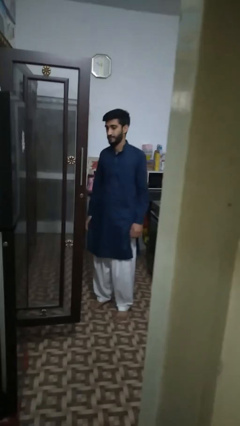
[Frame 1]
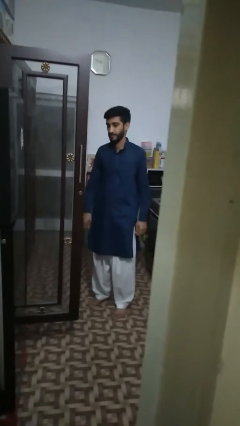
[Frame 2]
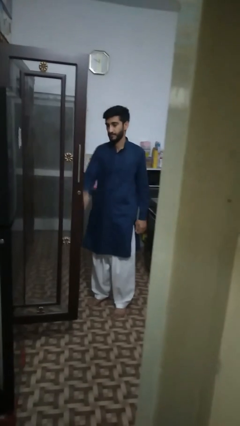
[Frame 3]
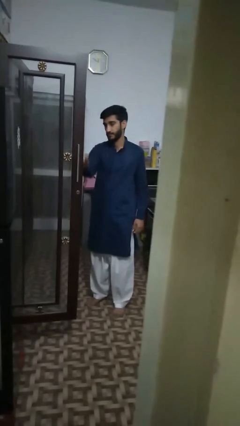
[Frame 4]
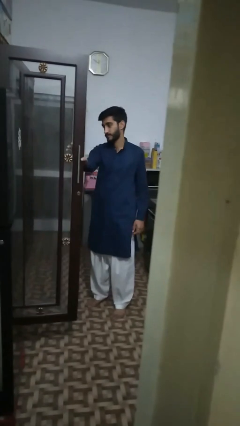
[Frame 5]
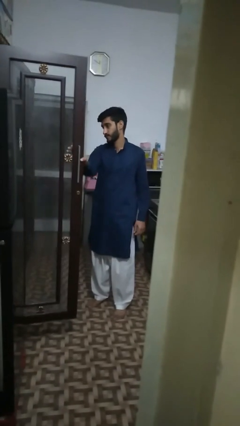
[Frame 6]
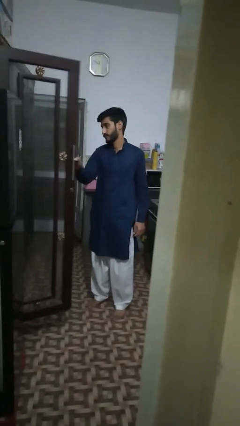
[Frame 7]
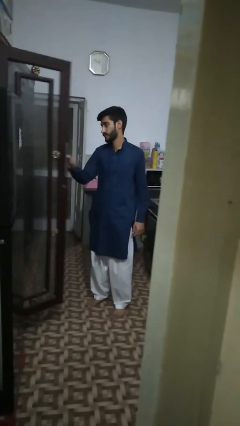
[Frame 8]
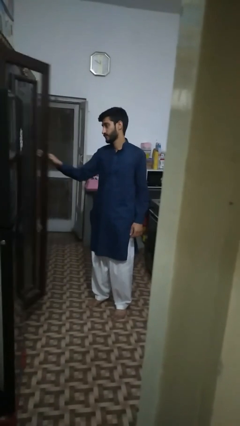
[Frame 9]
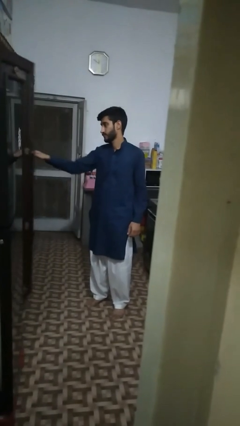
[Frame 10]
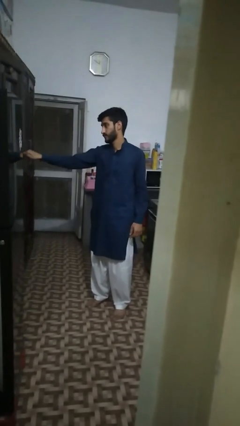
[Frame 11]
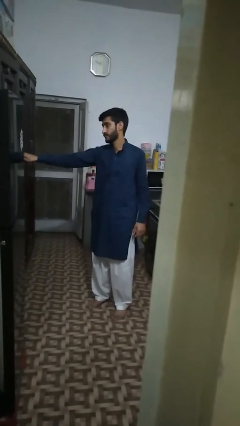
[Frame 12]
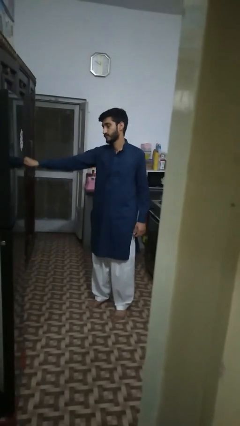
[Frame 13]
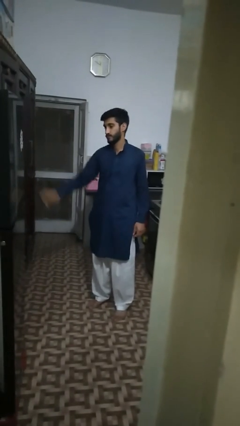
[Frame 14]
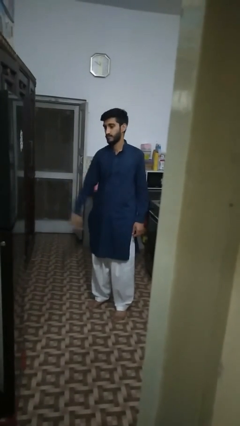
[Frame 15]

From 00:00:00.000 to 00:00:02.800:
person closes cabinet

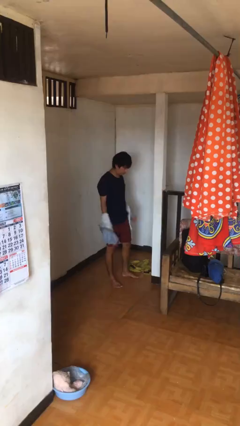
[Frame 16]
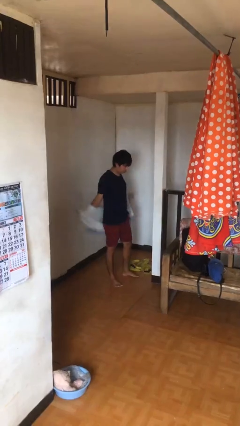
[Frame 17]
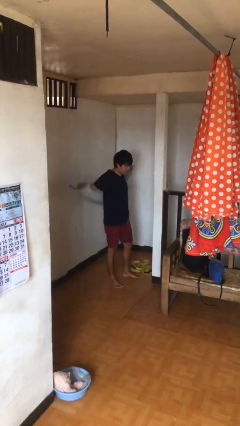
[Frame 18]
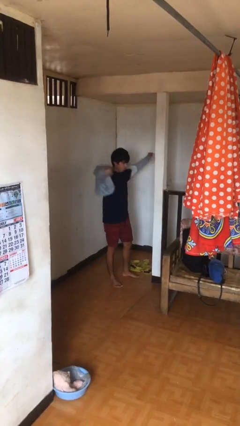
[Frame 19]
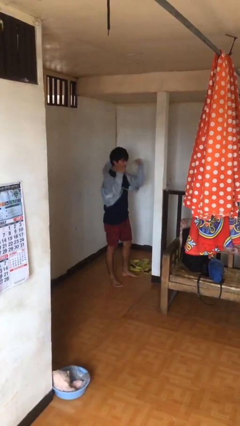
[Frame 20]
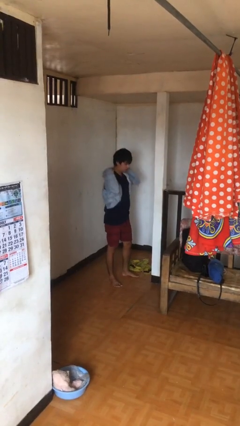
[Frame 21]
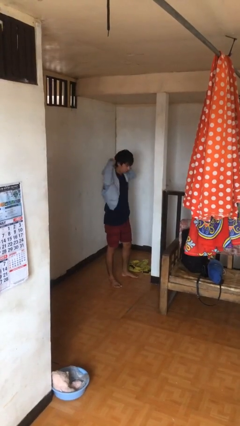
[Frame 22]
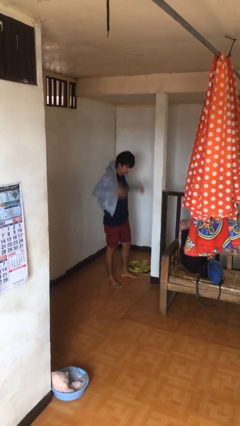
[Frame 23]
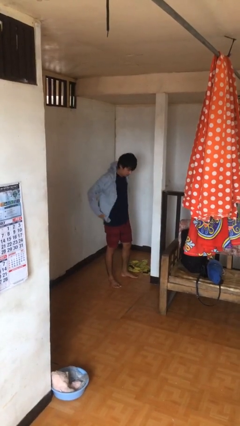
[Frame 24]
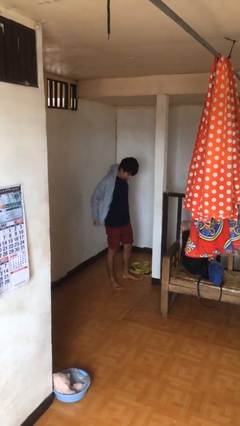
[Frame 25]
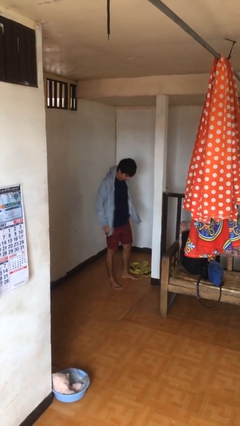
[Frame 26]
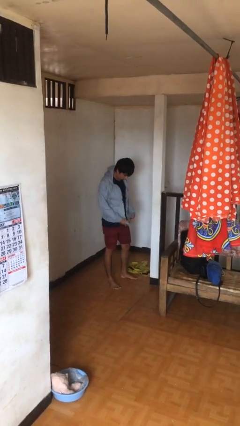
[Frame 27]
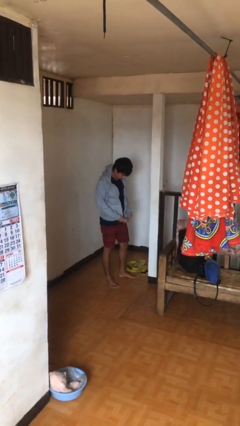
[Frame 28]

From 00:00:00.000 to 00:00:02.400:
person puts on jacket

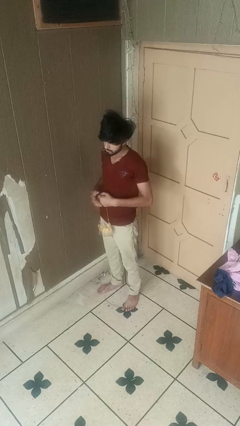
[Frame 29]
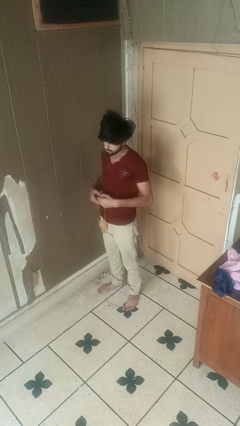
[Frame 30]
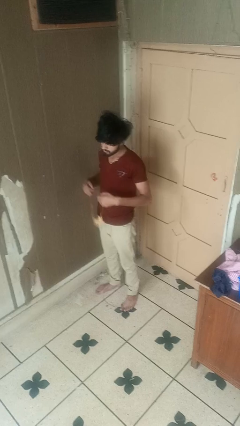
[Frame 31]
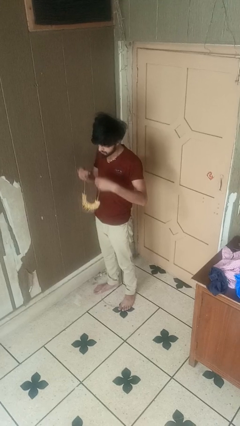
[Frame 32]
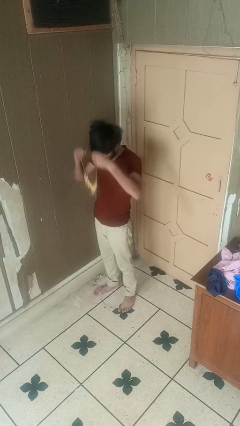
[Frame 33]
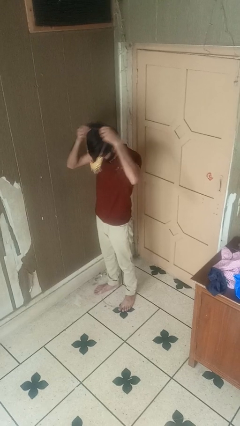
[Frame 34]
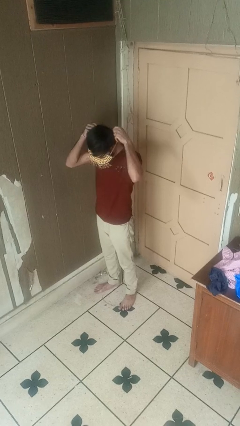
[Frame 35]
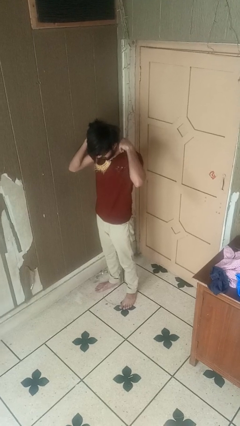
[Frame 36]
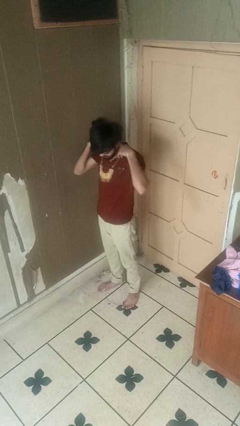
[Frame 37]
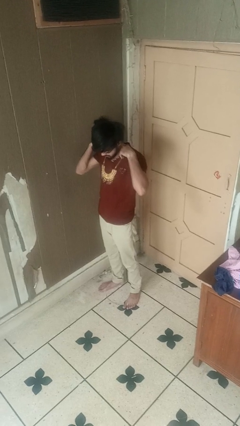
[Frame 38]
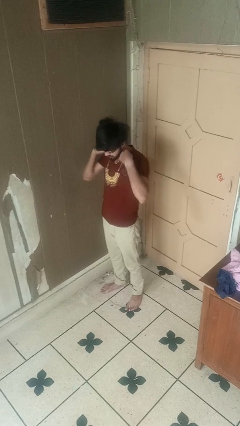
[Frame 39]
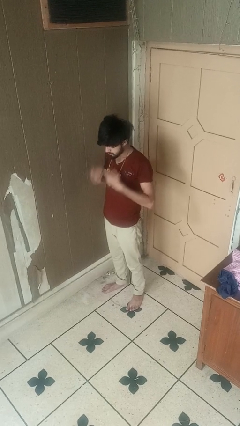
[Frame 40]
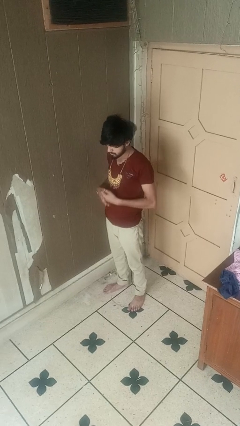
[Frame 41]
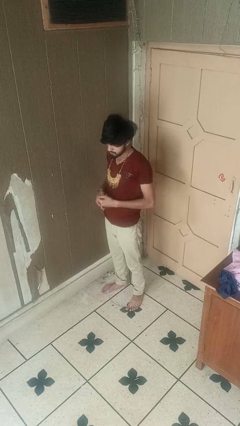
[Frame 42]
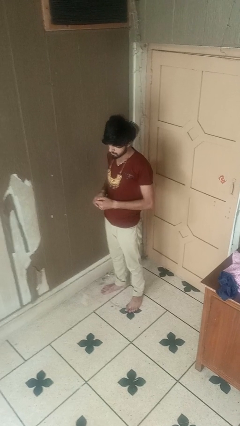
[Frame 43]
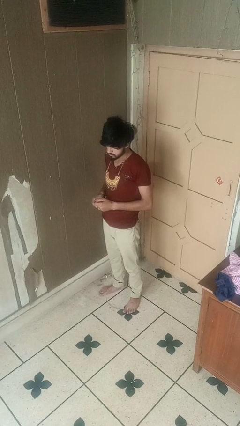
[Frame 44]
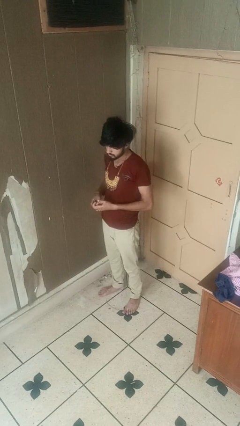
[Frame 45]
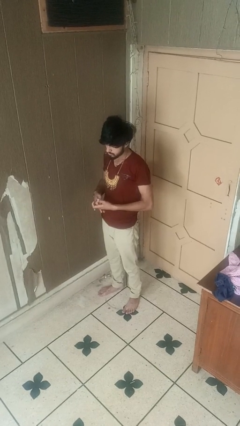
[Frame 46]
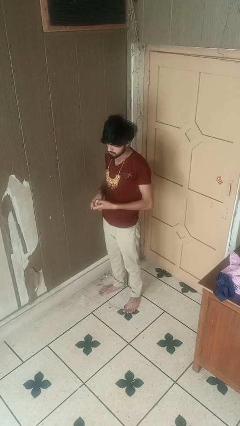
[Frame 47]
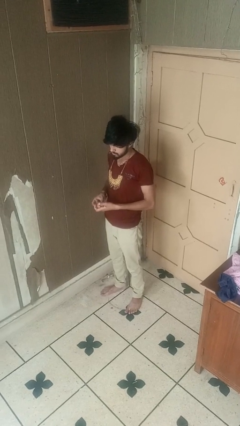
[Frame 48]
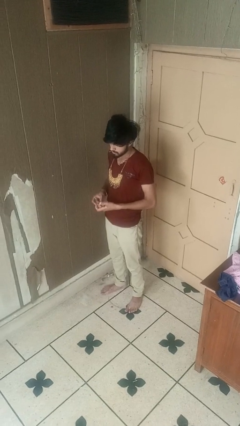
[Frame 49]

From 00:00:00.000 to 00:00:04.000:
person puts on necklace

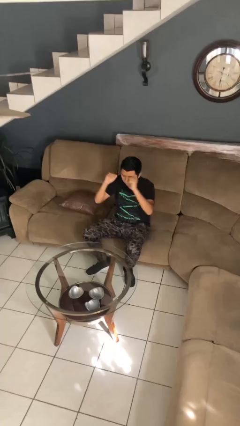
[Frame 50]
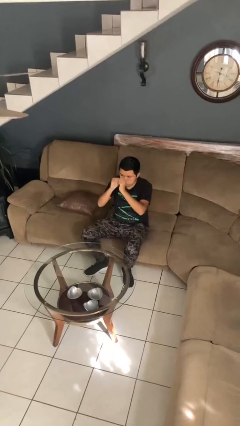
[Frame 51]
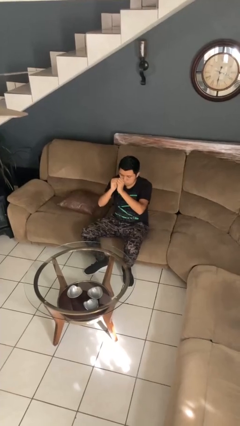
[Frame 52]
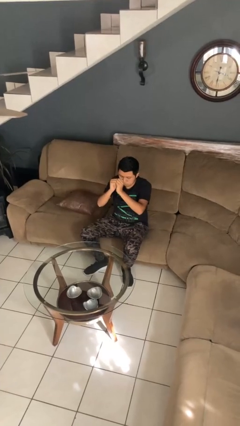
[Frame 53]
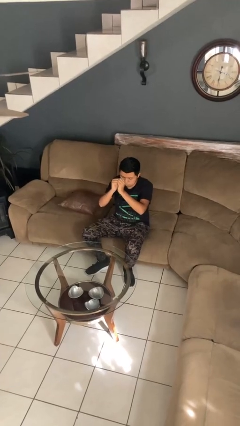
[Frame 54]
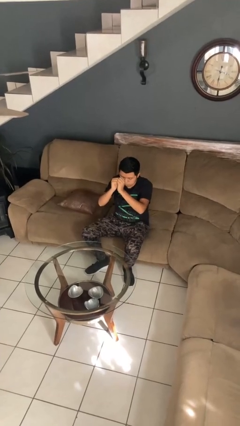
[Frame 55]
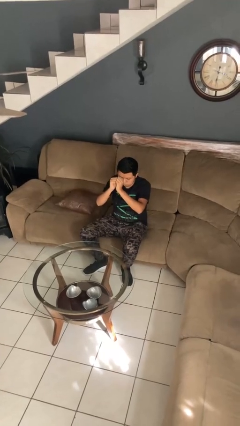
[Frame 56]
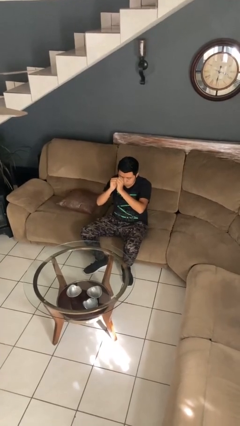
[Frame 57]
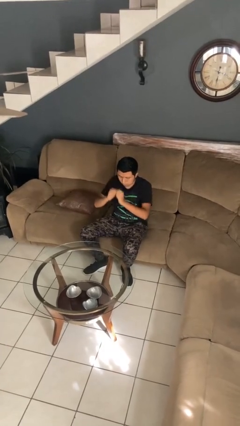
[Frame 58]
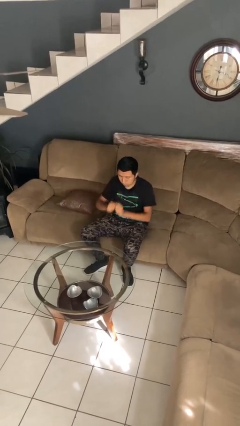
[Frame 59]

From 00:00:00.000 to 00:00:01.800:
person gestures zoom out

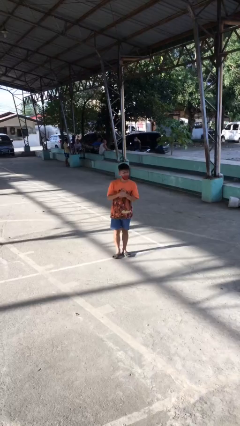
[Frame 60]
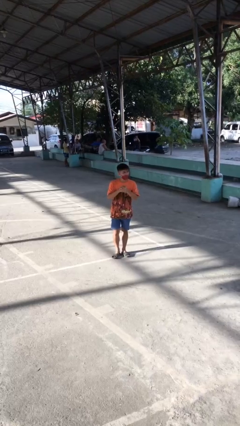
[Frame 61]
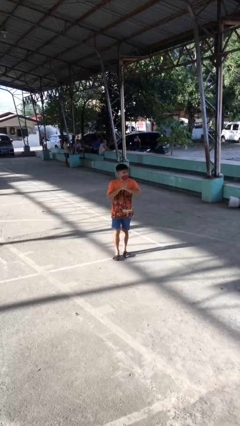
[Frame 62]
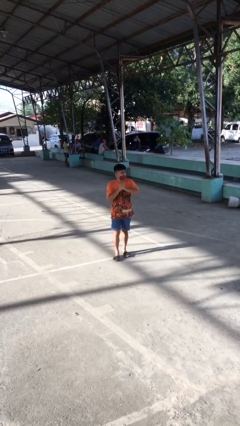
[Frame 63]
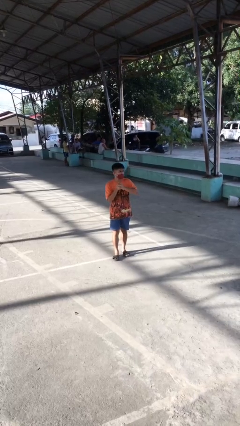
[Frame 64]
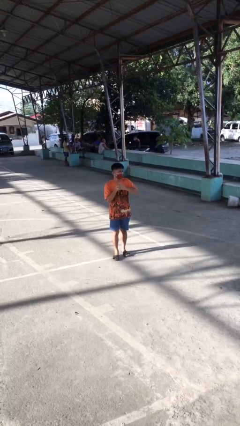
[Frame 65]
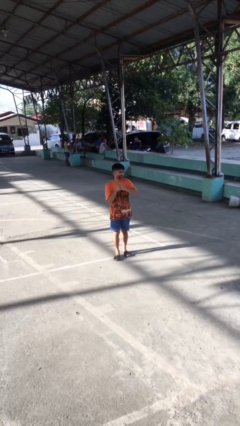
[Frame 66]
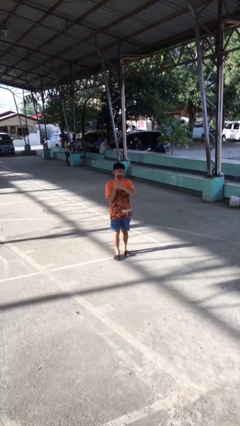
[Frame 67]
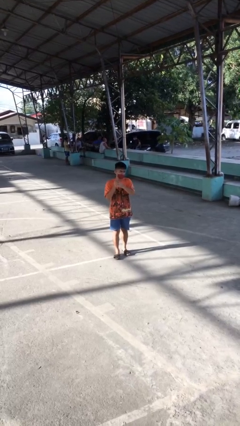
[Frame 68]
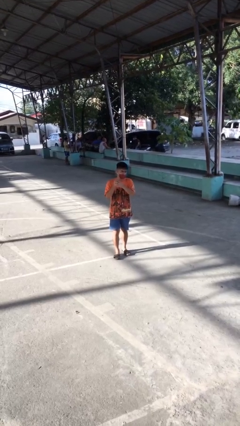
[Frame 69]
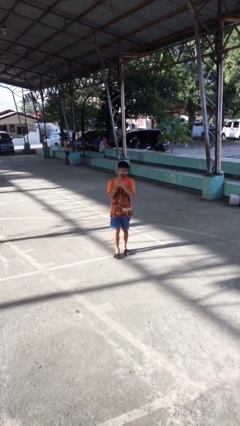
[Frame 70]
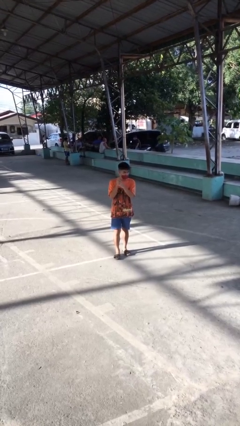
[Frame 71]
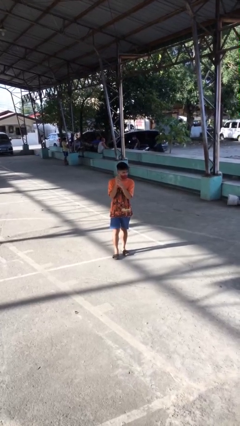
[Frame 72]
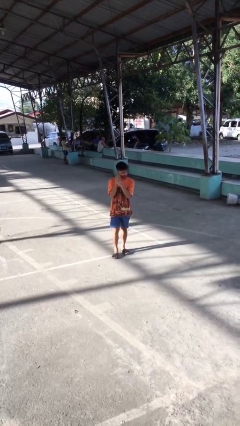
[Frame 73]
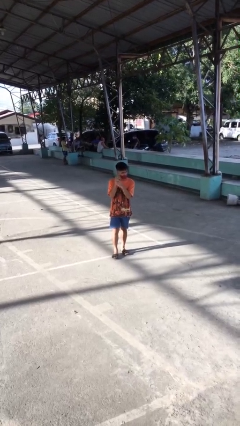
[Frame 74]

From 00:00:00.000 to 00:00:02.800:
person cracks knuckles

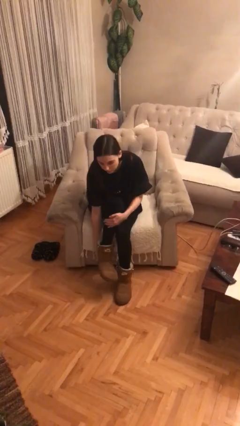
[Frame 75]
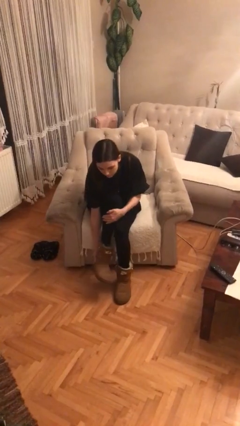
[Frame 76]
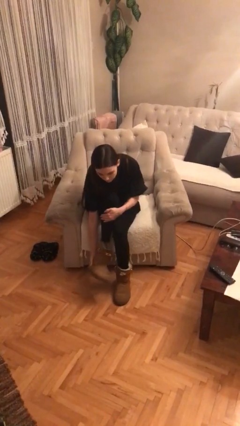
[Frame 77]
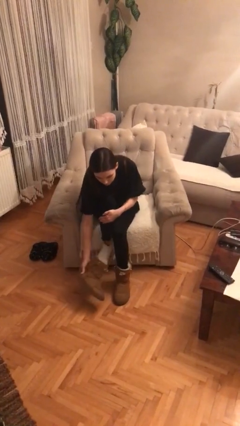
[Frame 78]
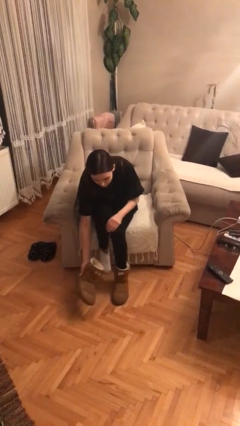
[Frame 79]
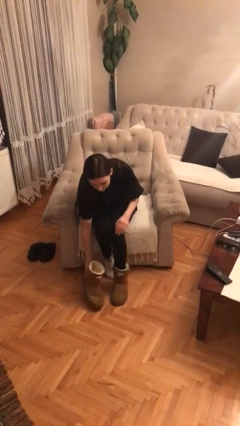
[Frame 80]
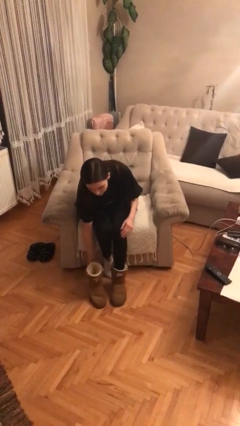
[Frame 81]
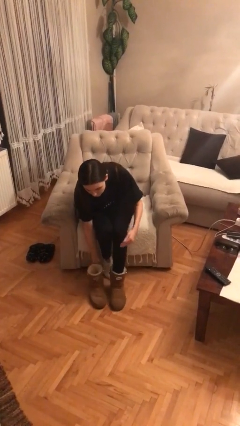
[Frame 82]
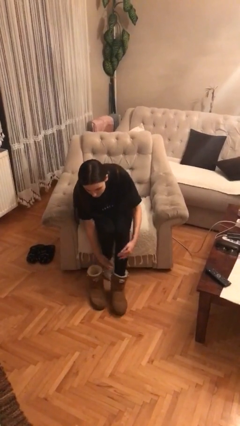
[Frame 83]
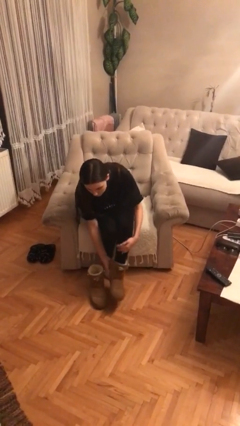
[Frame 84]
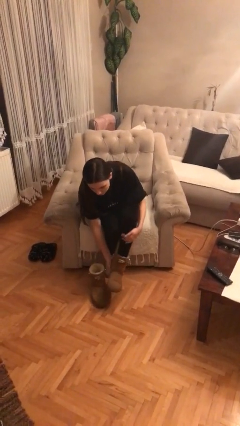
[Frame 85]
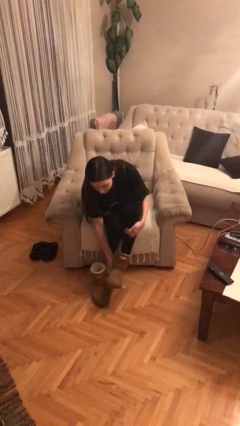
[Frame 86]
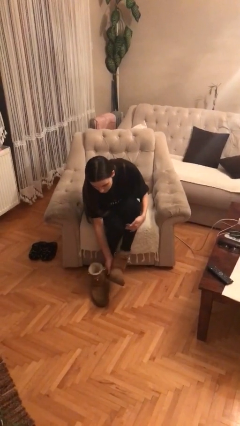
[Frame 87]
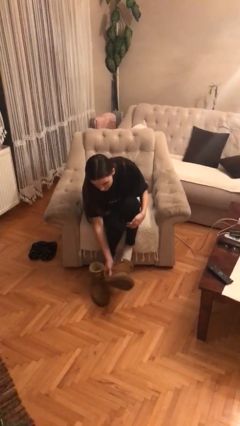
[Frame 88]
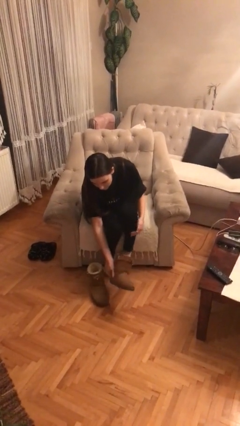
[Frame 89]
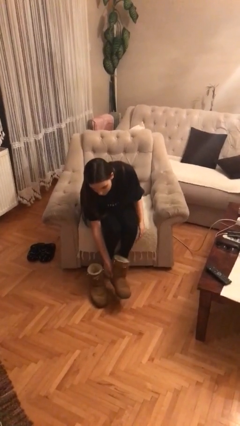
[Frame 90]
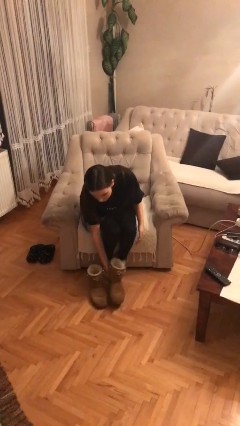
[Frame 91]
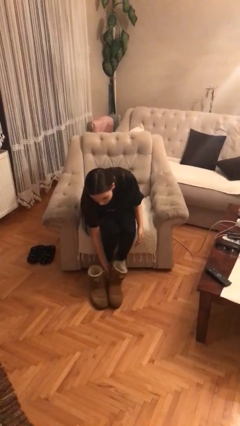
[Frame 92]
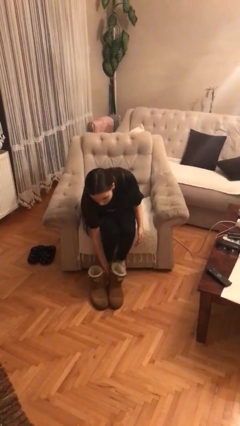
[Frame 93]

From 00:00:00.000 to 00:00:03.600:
person takes off shoes
